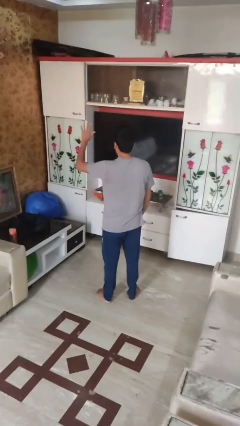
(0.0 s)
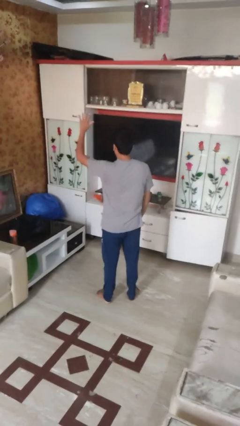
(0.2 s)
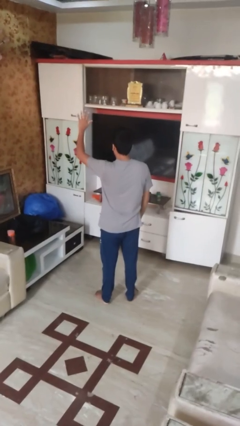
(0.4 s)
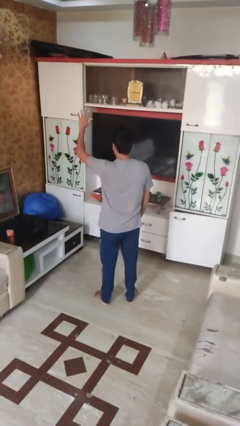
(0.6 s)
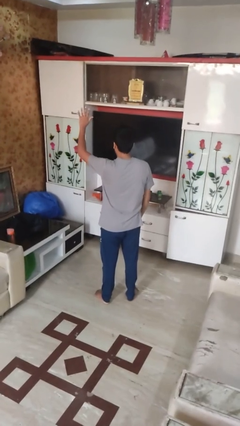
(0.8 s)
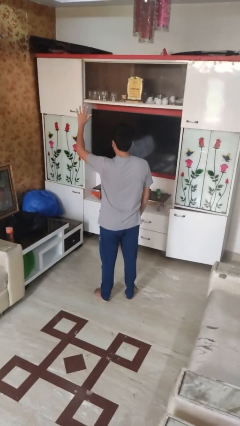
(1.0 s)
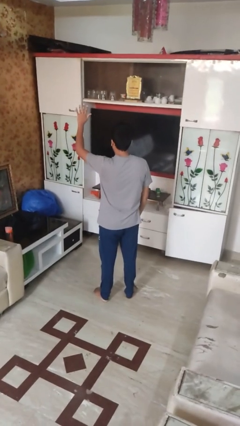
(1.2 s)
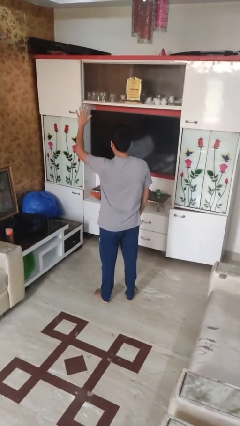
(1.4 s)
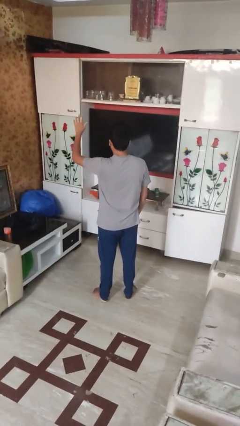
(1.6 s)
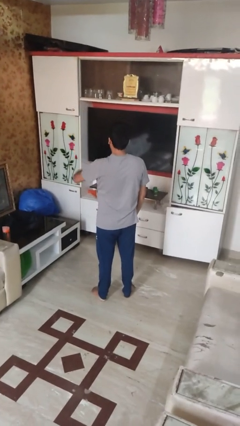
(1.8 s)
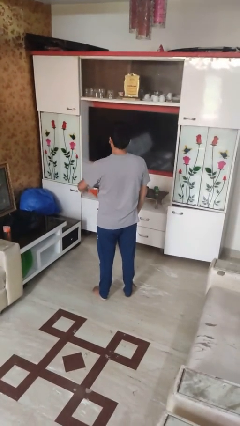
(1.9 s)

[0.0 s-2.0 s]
person gestures number five

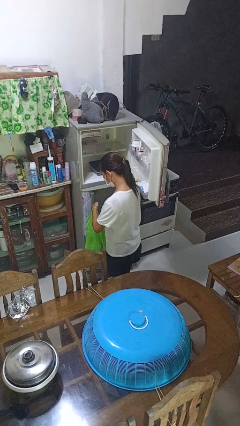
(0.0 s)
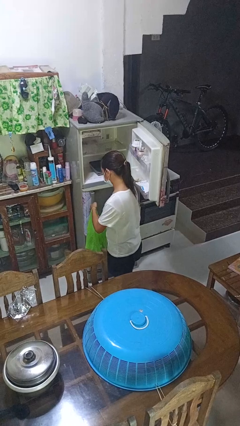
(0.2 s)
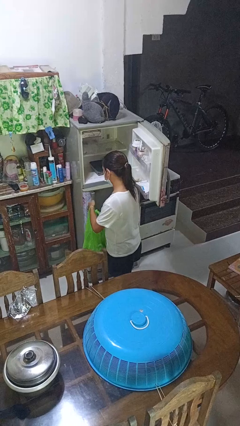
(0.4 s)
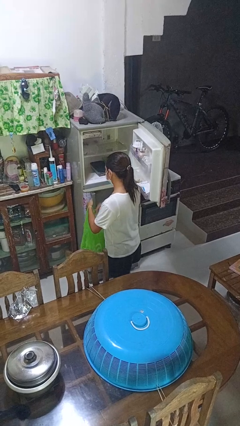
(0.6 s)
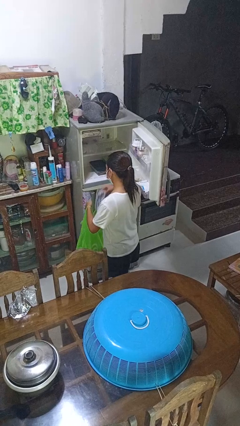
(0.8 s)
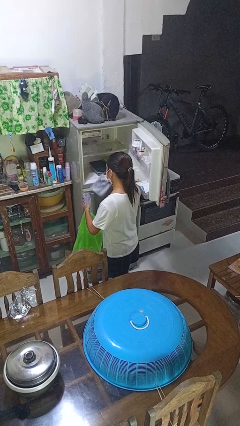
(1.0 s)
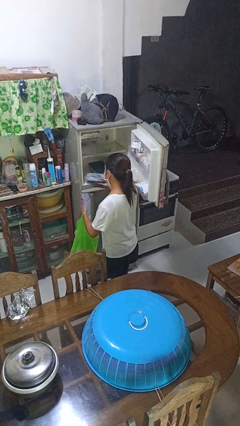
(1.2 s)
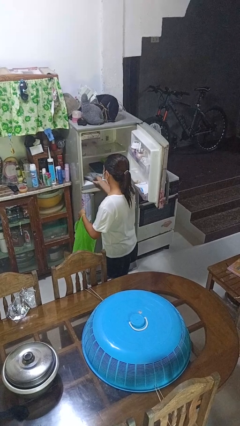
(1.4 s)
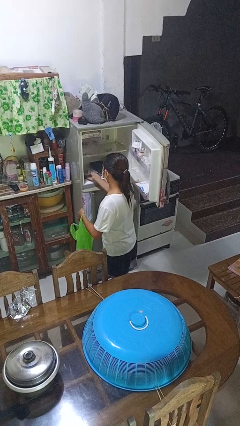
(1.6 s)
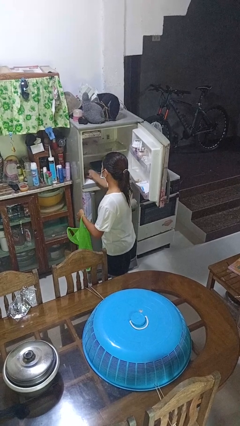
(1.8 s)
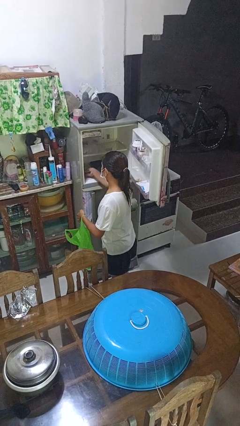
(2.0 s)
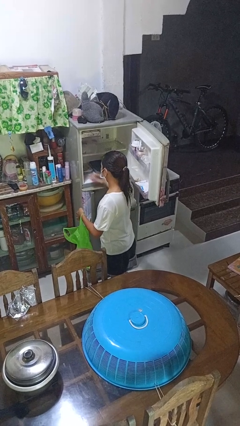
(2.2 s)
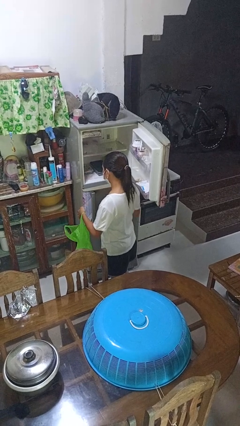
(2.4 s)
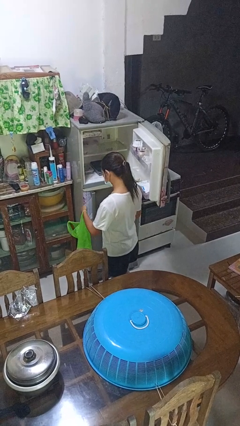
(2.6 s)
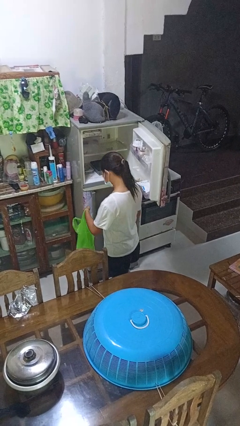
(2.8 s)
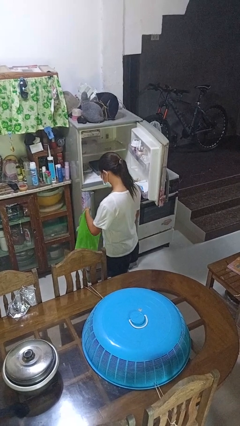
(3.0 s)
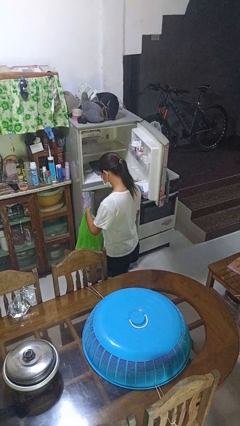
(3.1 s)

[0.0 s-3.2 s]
person loads groceries into refrigerator

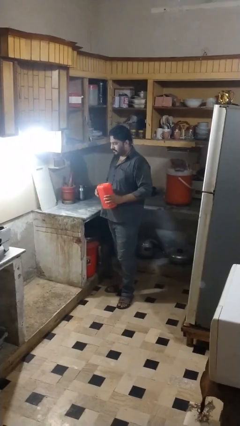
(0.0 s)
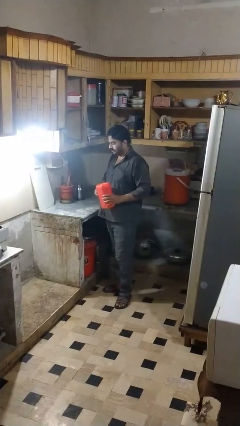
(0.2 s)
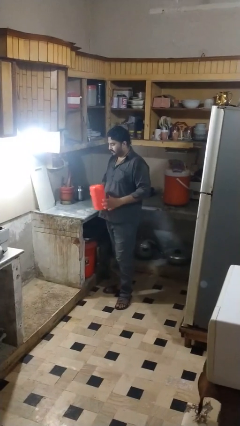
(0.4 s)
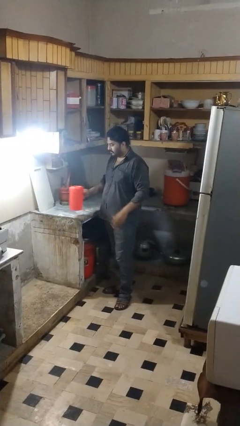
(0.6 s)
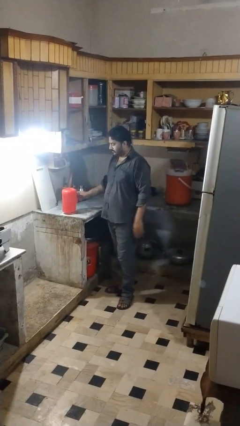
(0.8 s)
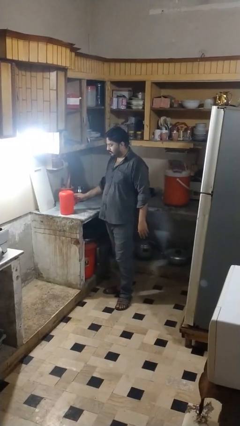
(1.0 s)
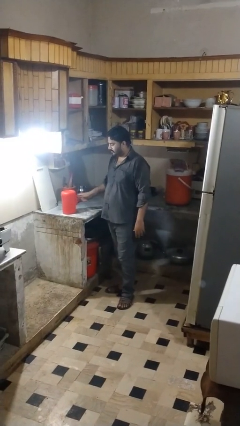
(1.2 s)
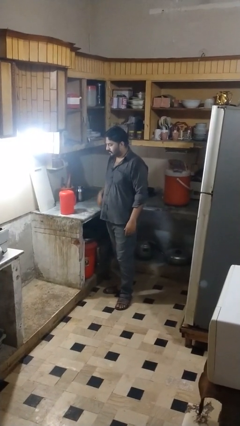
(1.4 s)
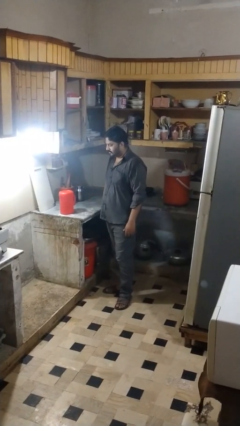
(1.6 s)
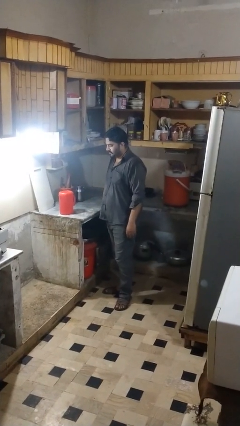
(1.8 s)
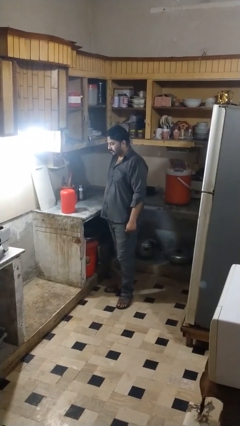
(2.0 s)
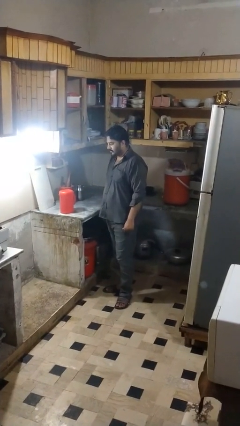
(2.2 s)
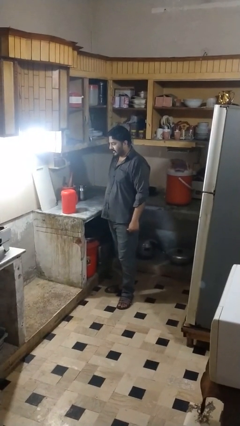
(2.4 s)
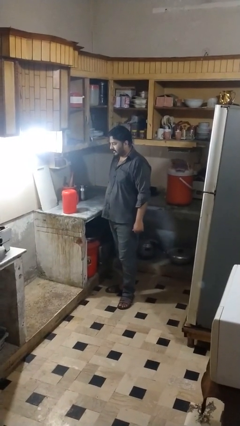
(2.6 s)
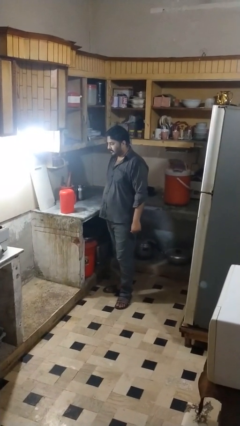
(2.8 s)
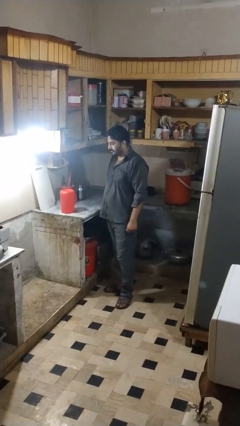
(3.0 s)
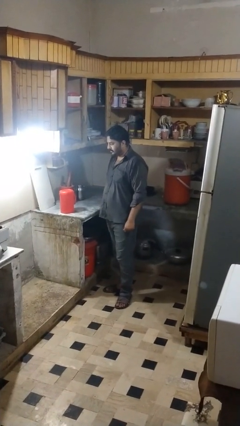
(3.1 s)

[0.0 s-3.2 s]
person puts down object on countertop

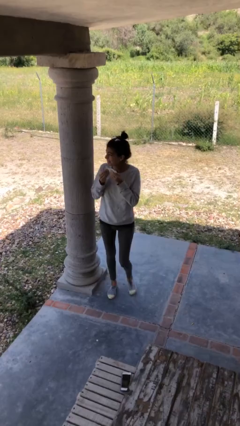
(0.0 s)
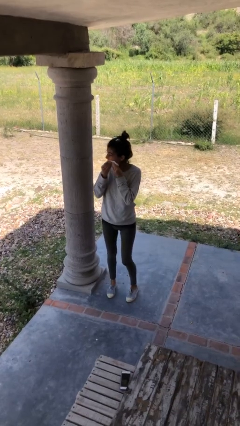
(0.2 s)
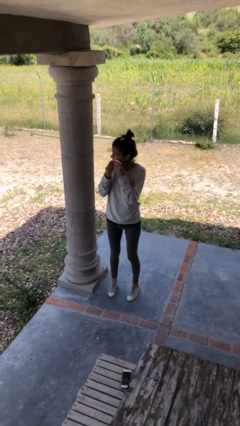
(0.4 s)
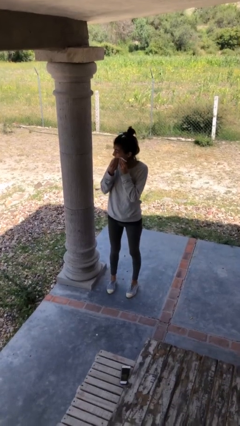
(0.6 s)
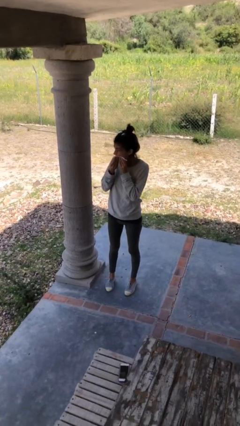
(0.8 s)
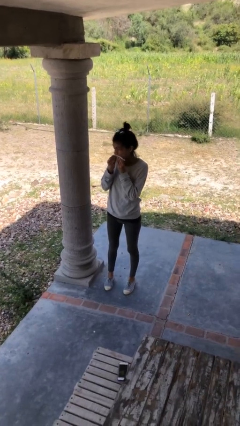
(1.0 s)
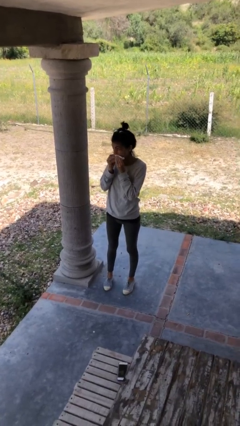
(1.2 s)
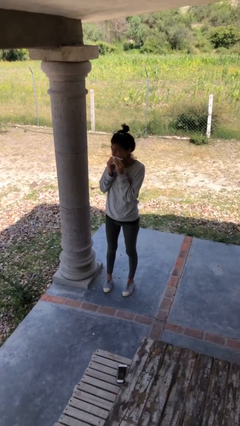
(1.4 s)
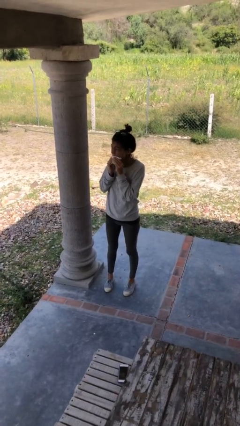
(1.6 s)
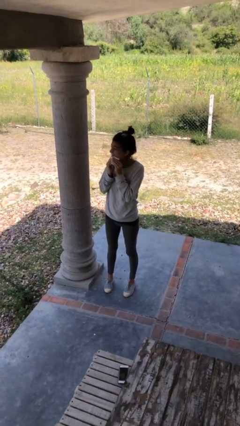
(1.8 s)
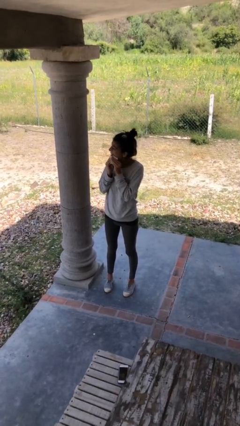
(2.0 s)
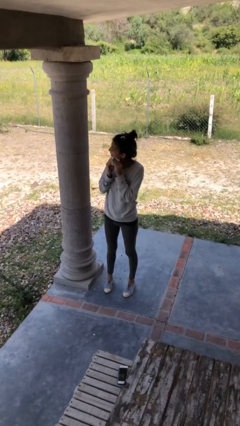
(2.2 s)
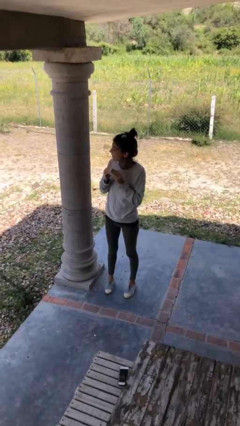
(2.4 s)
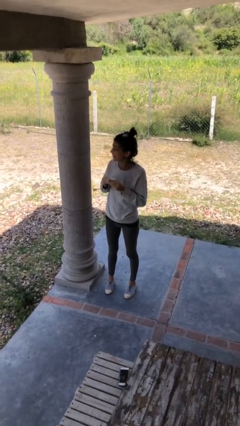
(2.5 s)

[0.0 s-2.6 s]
person wipes mouth with napkin

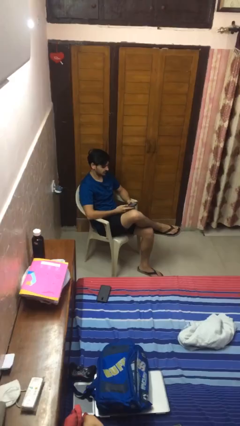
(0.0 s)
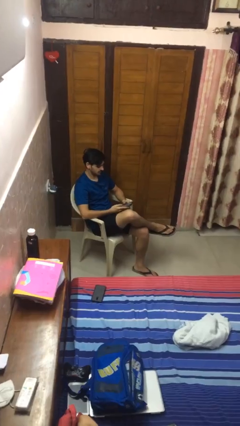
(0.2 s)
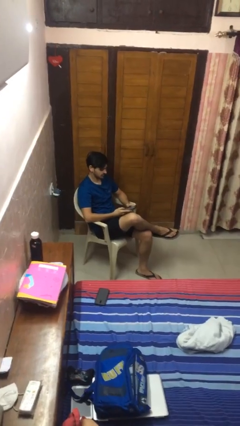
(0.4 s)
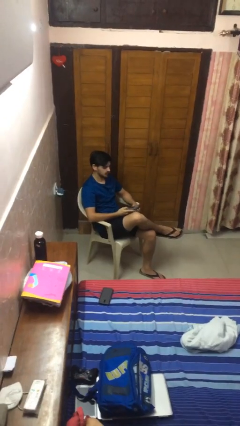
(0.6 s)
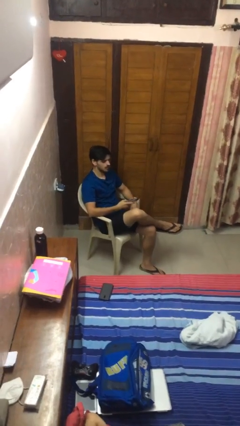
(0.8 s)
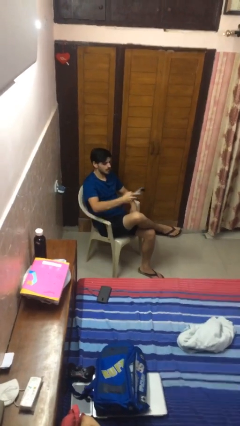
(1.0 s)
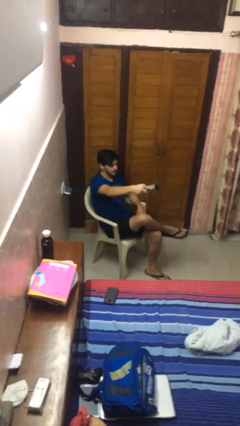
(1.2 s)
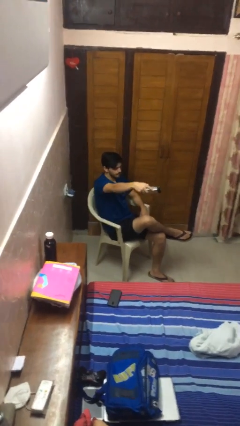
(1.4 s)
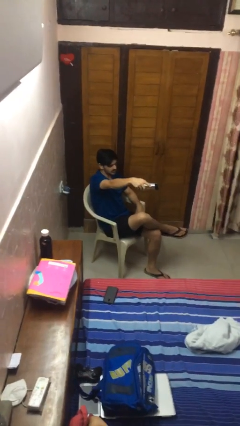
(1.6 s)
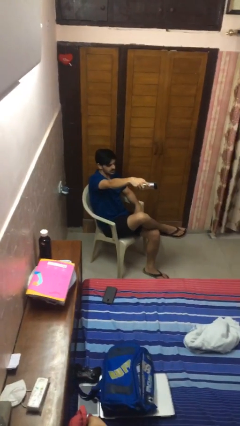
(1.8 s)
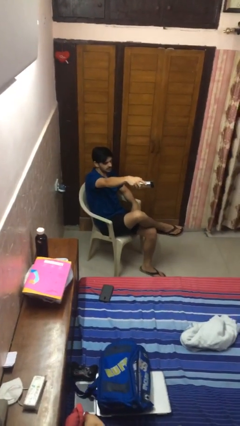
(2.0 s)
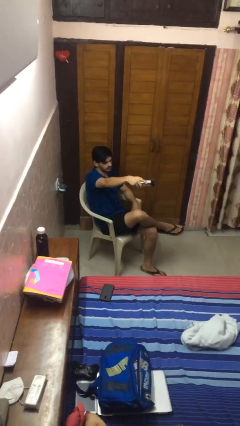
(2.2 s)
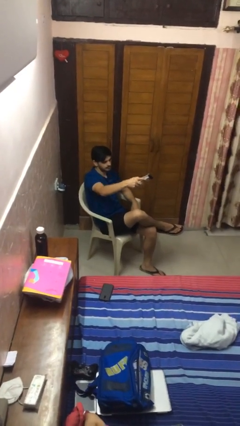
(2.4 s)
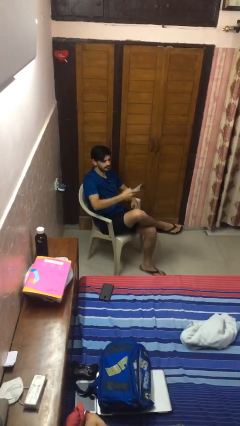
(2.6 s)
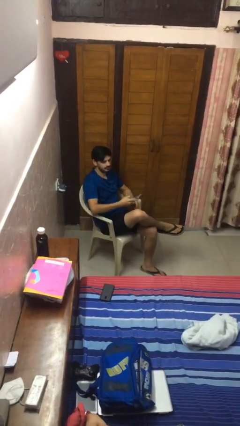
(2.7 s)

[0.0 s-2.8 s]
person uses television remote

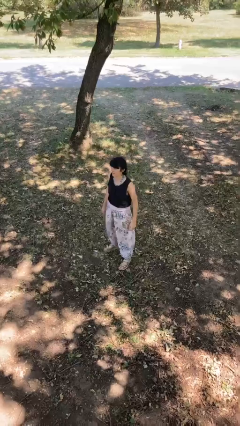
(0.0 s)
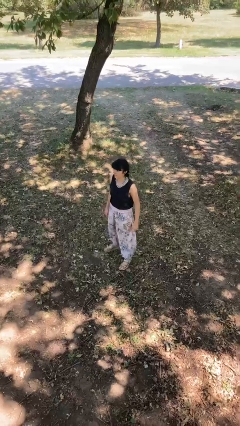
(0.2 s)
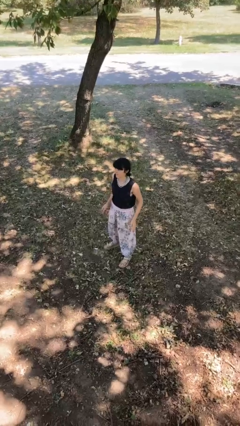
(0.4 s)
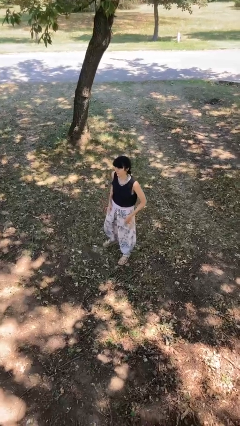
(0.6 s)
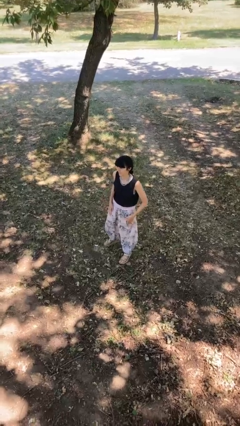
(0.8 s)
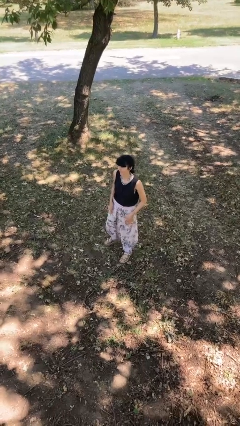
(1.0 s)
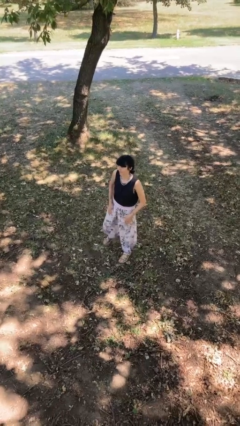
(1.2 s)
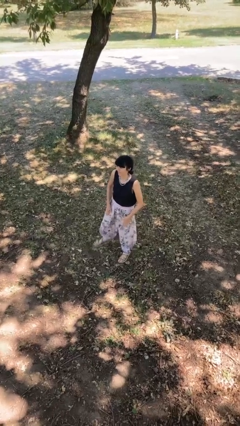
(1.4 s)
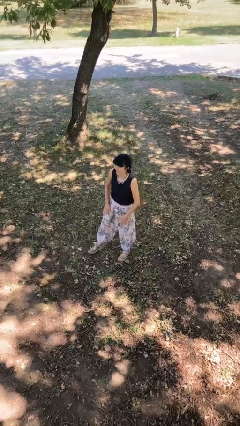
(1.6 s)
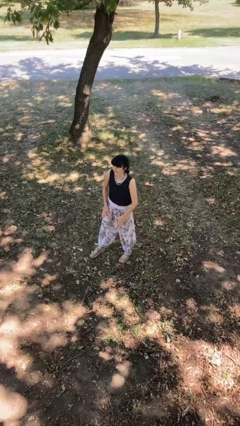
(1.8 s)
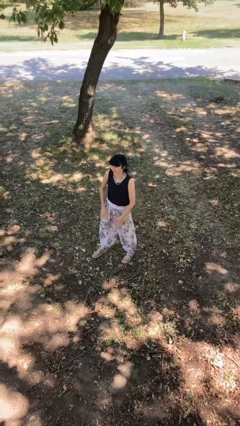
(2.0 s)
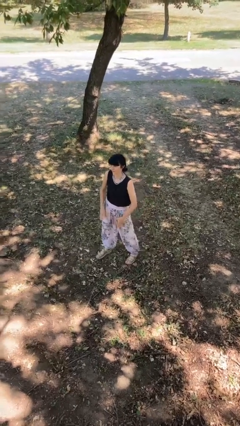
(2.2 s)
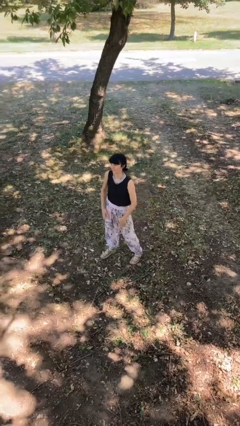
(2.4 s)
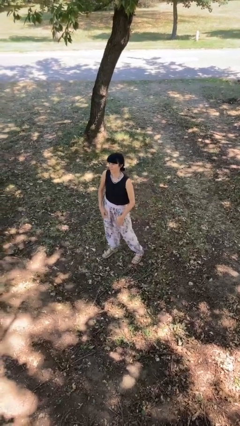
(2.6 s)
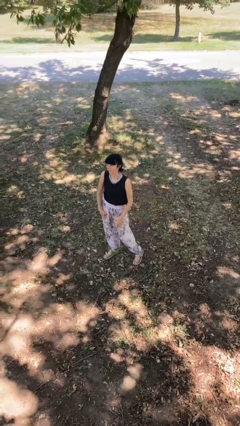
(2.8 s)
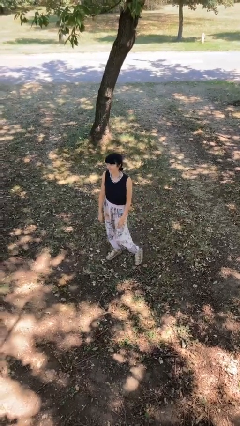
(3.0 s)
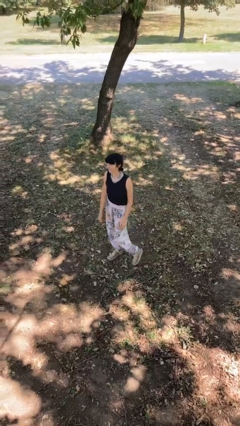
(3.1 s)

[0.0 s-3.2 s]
person slaps hands on thighs

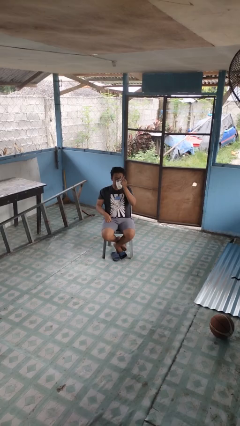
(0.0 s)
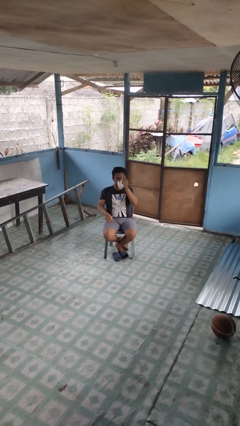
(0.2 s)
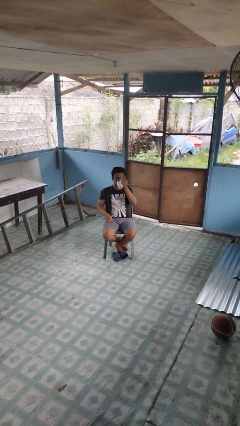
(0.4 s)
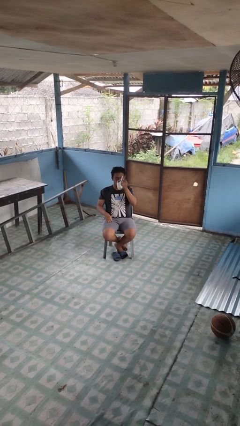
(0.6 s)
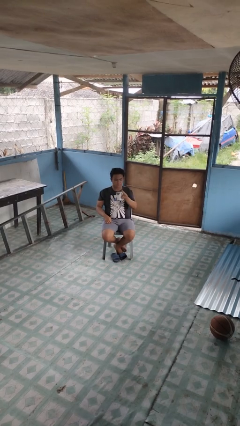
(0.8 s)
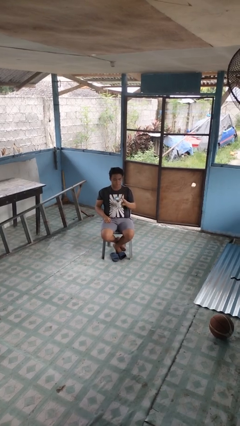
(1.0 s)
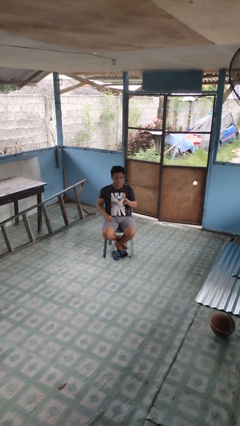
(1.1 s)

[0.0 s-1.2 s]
person drinks from mug
